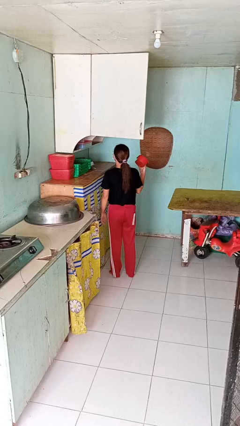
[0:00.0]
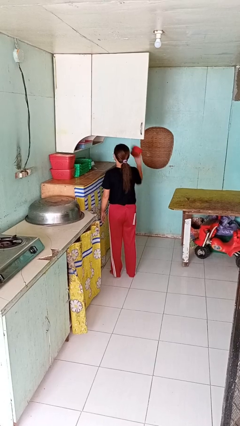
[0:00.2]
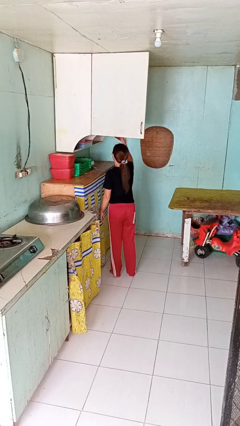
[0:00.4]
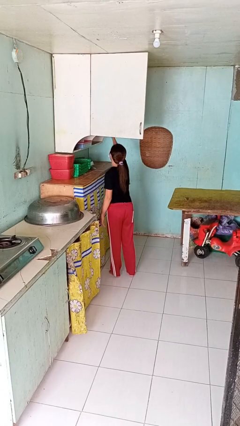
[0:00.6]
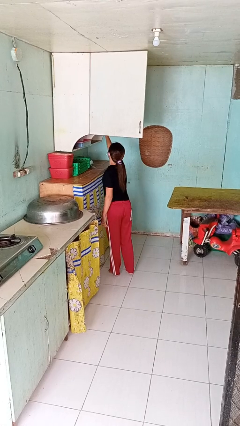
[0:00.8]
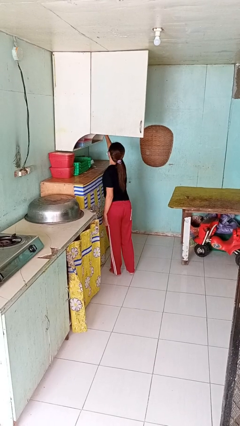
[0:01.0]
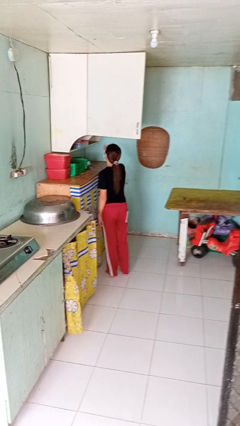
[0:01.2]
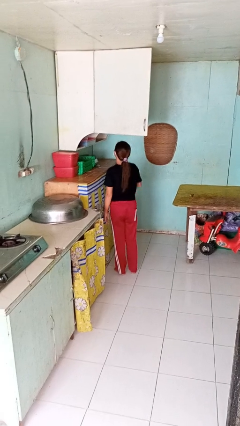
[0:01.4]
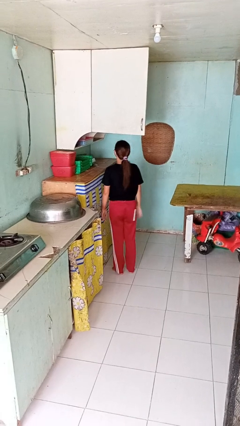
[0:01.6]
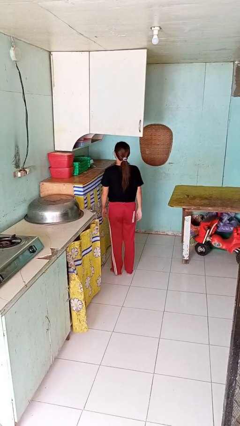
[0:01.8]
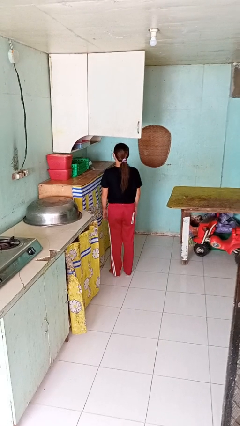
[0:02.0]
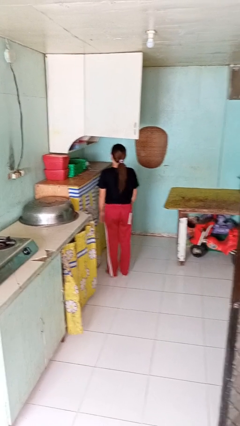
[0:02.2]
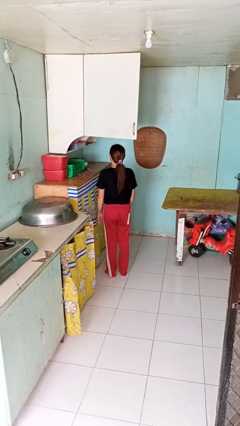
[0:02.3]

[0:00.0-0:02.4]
person puts object in cabinet

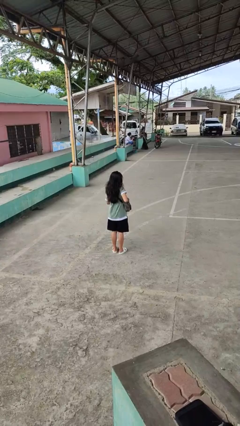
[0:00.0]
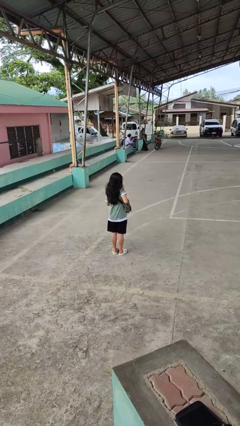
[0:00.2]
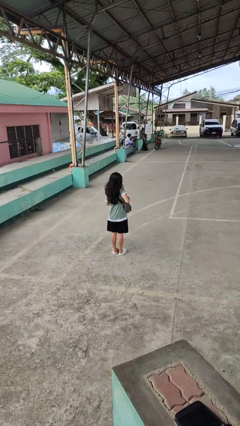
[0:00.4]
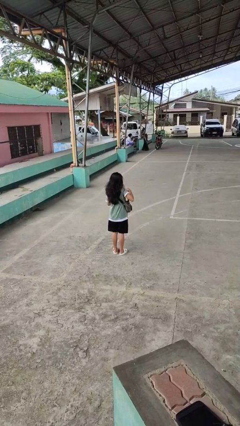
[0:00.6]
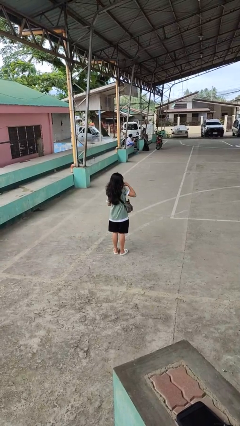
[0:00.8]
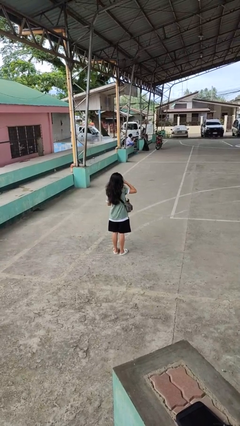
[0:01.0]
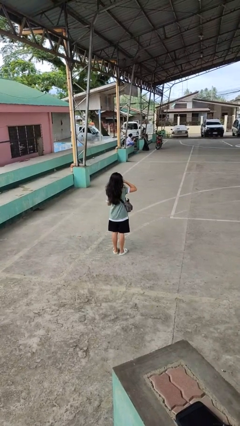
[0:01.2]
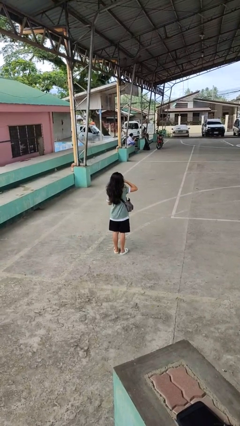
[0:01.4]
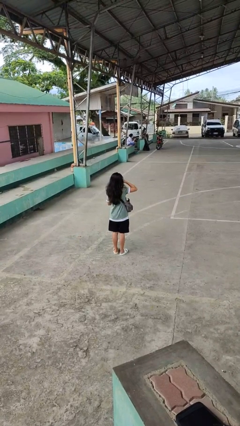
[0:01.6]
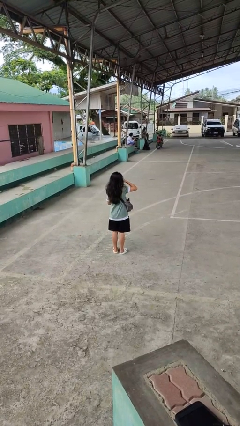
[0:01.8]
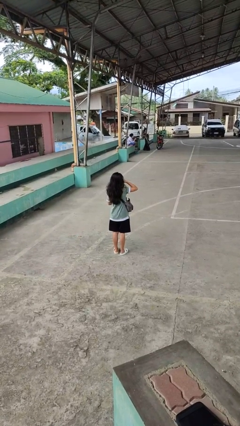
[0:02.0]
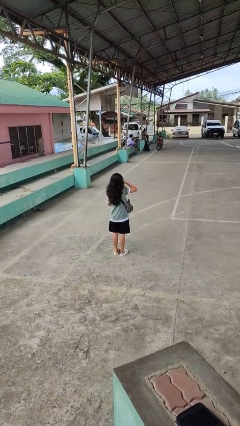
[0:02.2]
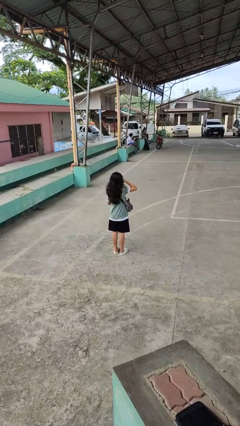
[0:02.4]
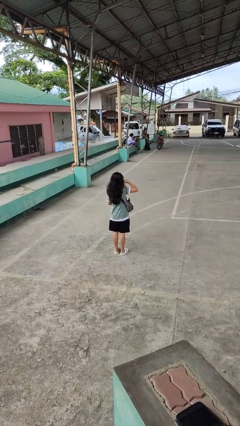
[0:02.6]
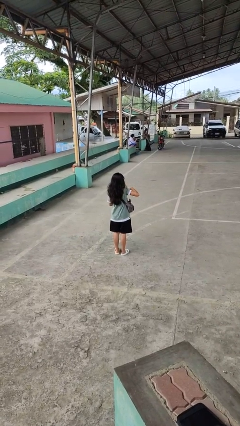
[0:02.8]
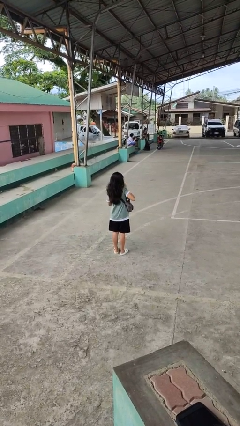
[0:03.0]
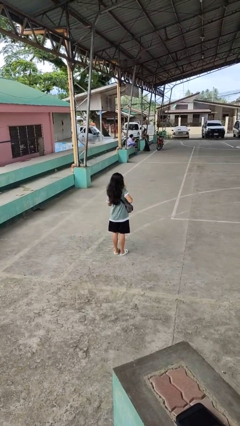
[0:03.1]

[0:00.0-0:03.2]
person eats snack from bag

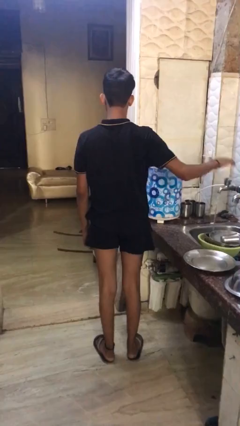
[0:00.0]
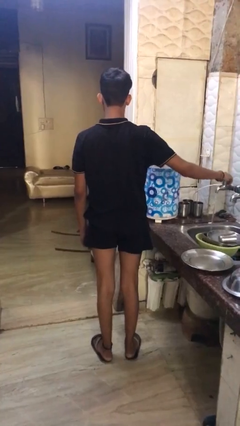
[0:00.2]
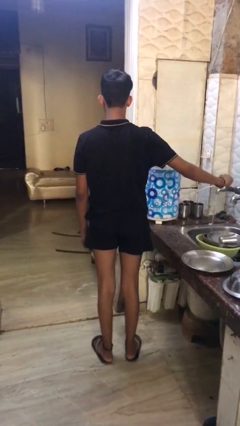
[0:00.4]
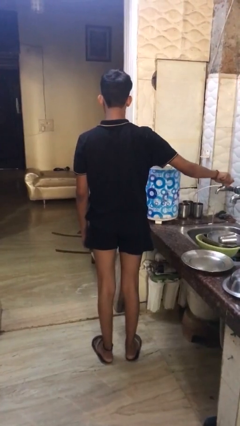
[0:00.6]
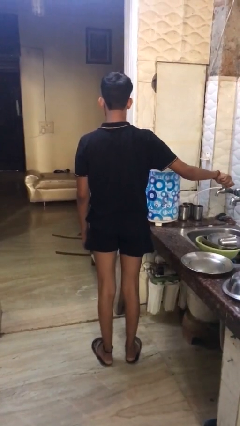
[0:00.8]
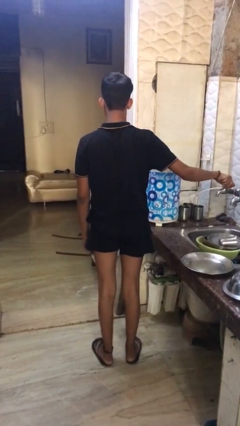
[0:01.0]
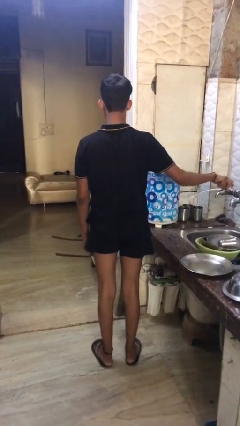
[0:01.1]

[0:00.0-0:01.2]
person turns off faucet

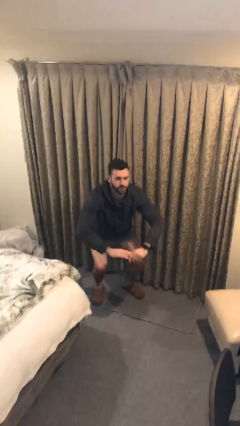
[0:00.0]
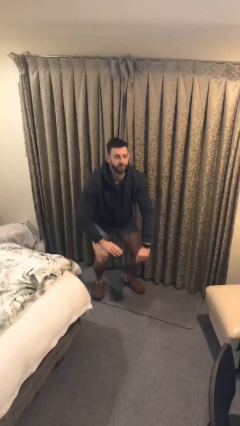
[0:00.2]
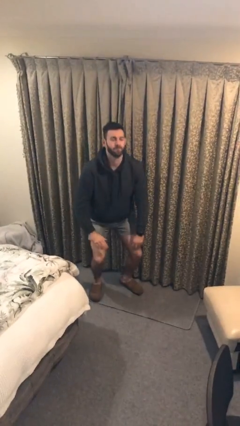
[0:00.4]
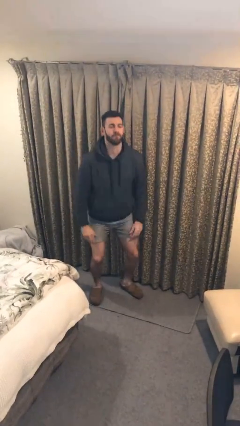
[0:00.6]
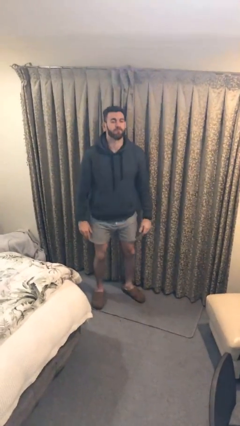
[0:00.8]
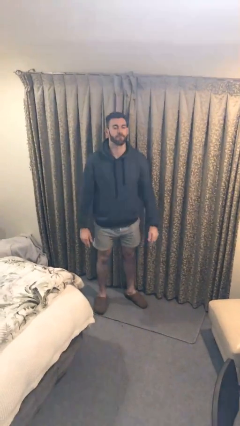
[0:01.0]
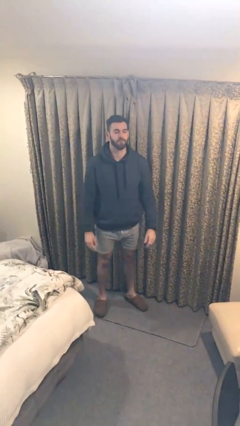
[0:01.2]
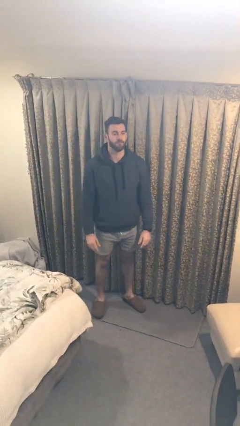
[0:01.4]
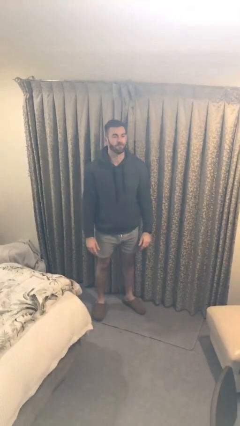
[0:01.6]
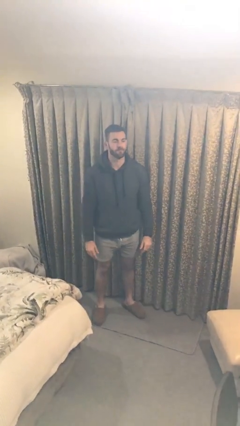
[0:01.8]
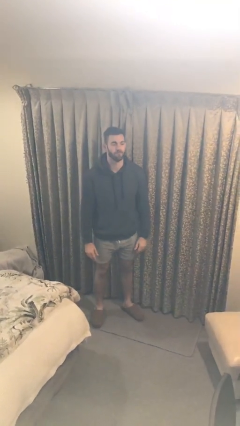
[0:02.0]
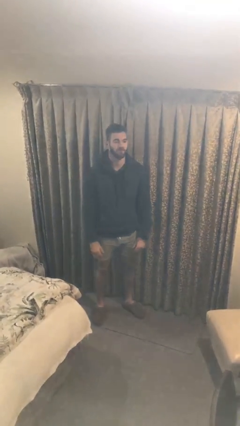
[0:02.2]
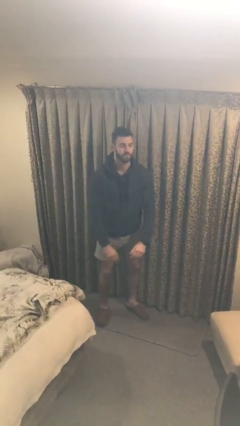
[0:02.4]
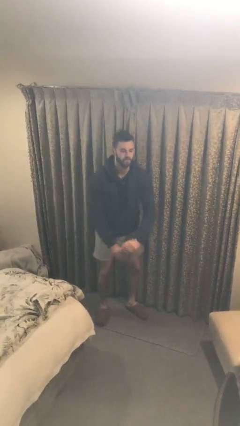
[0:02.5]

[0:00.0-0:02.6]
person stands up

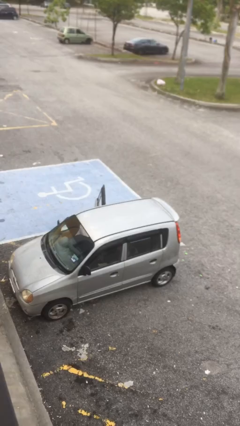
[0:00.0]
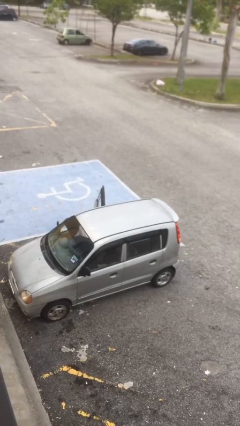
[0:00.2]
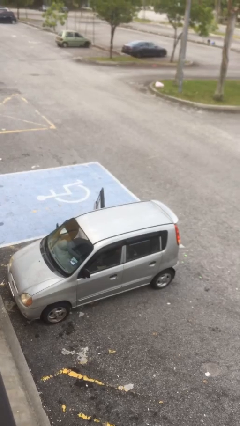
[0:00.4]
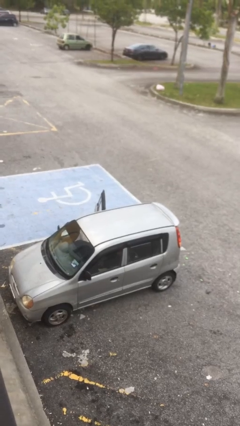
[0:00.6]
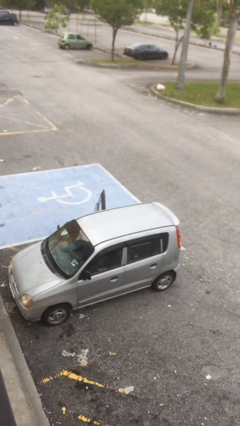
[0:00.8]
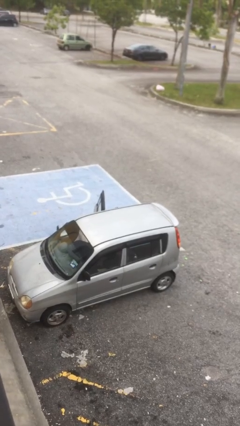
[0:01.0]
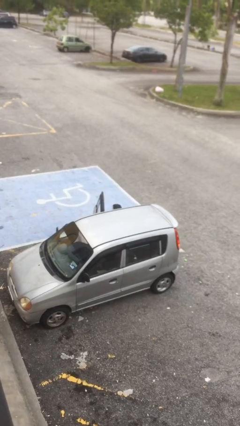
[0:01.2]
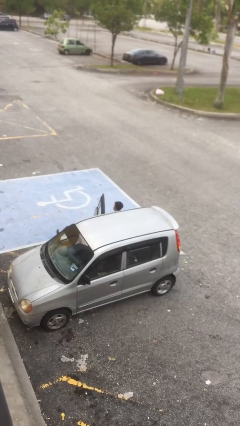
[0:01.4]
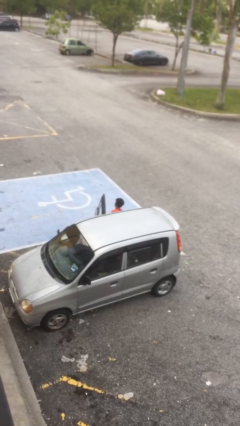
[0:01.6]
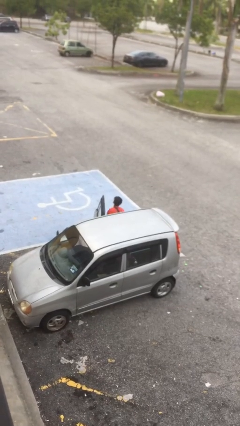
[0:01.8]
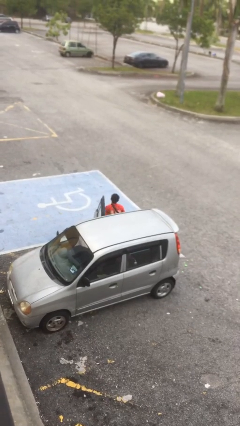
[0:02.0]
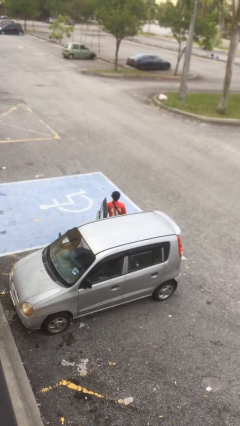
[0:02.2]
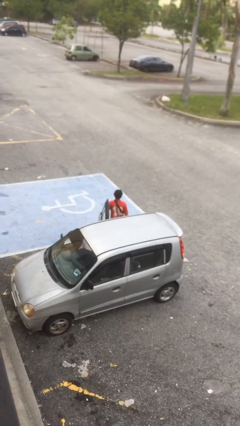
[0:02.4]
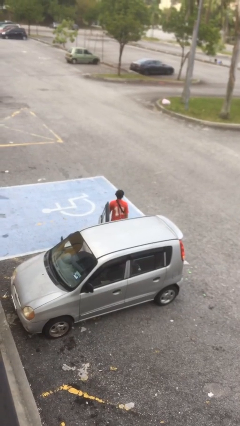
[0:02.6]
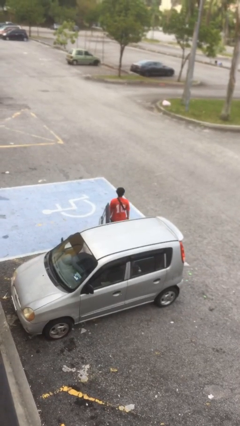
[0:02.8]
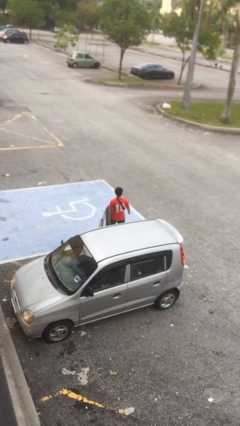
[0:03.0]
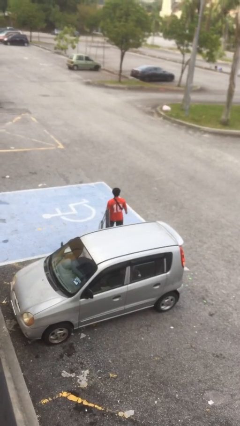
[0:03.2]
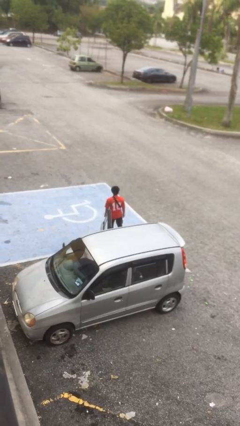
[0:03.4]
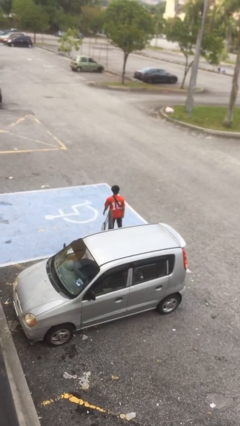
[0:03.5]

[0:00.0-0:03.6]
person exits car

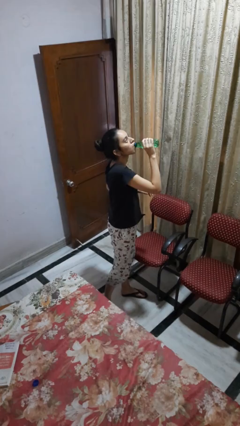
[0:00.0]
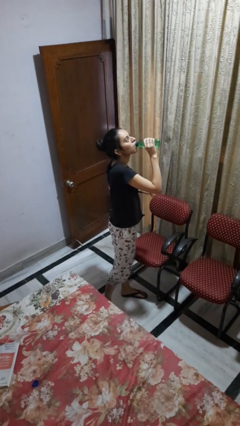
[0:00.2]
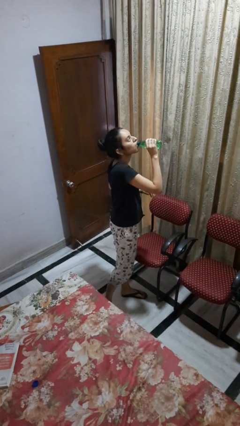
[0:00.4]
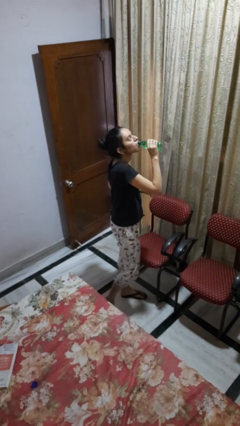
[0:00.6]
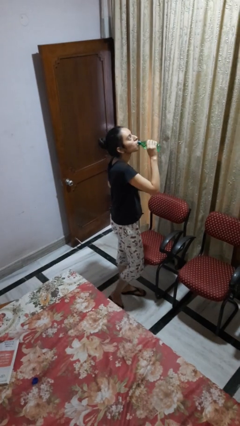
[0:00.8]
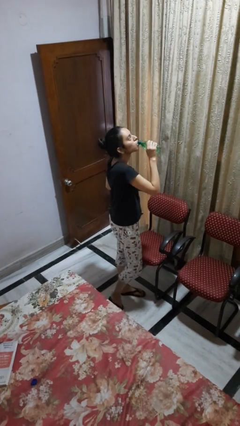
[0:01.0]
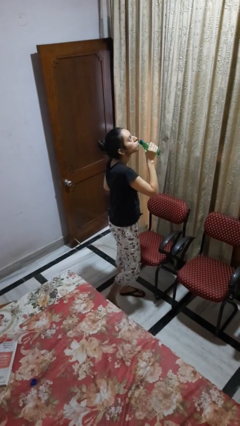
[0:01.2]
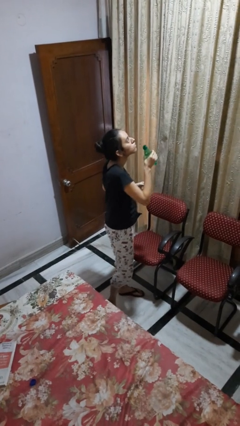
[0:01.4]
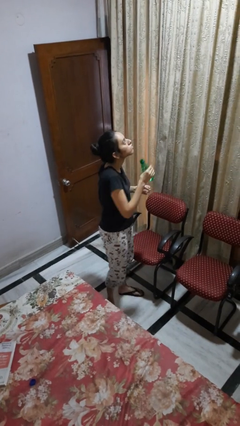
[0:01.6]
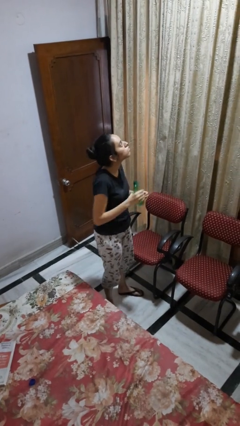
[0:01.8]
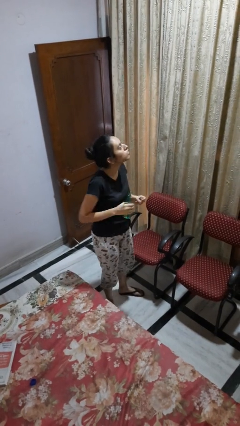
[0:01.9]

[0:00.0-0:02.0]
person drinks from bottle

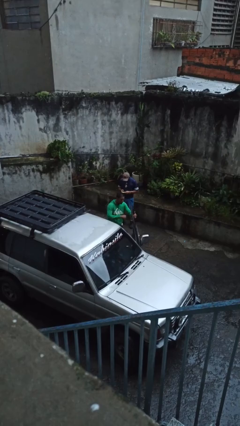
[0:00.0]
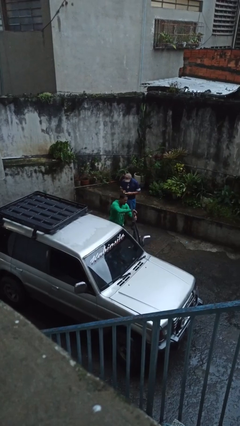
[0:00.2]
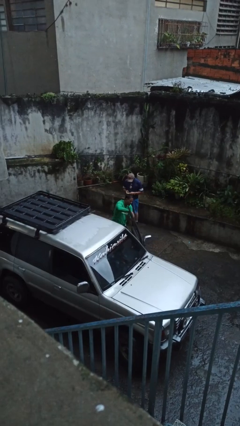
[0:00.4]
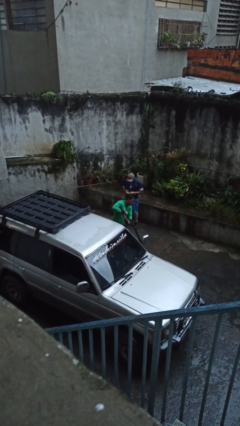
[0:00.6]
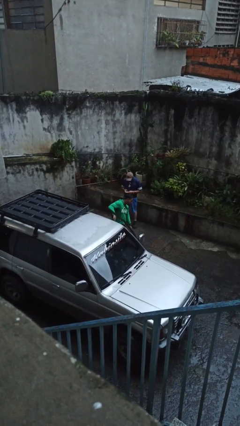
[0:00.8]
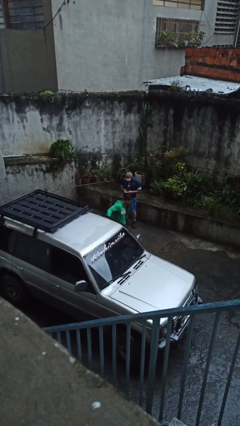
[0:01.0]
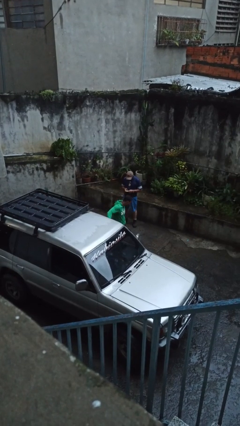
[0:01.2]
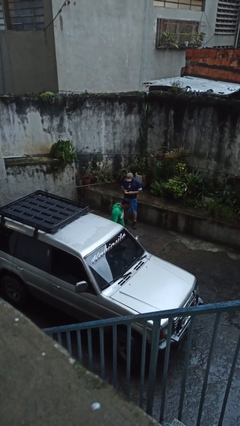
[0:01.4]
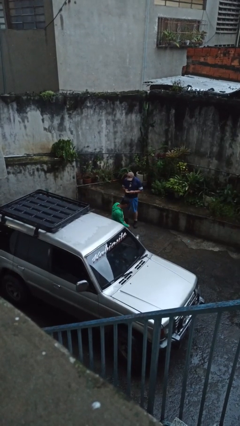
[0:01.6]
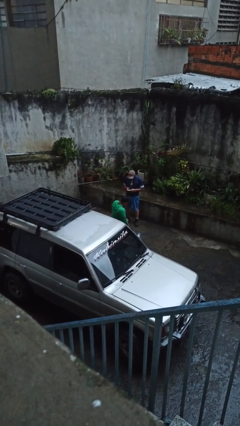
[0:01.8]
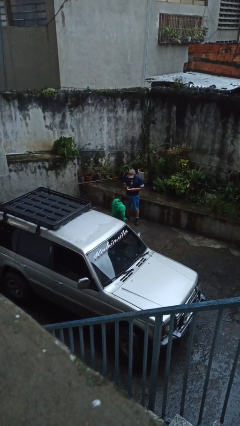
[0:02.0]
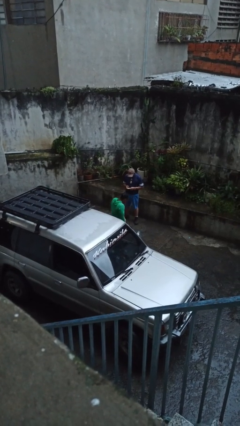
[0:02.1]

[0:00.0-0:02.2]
person closes car door
